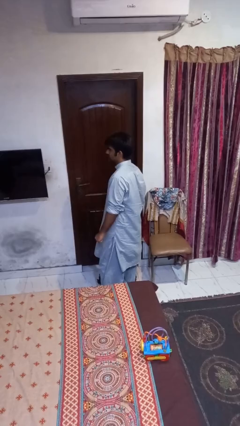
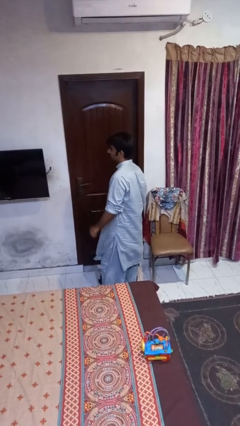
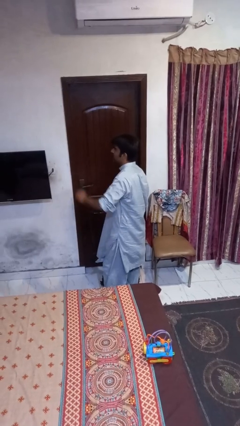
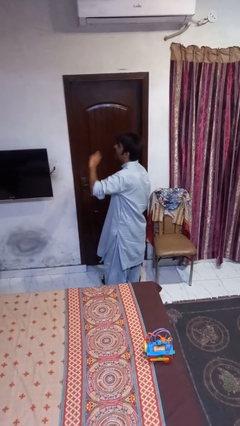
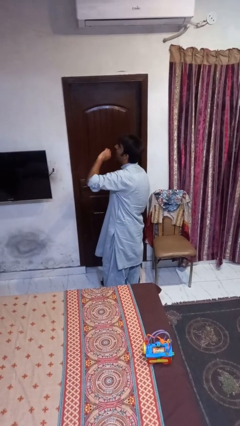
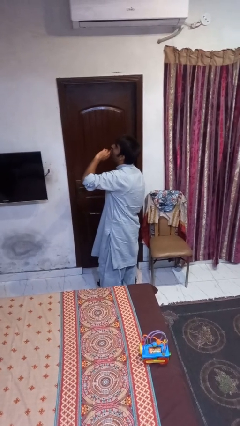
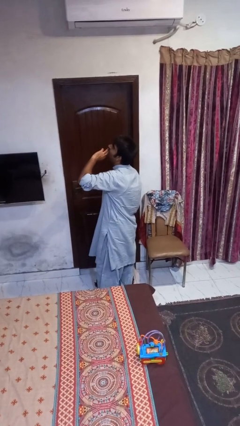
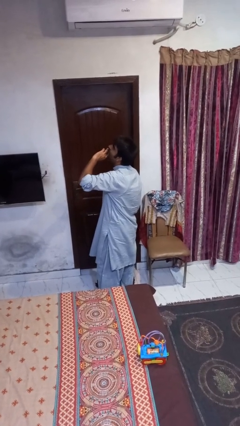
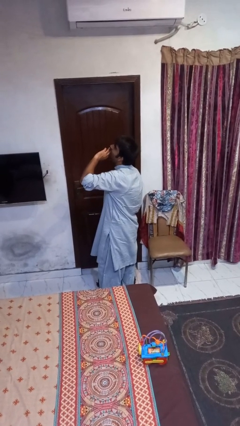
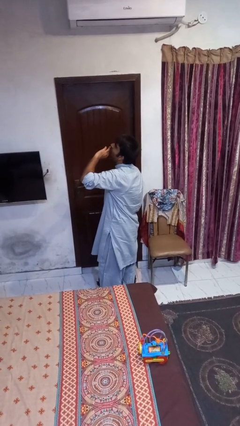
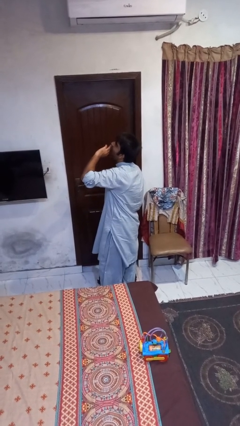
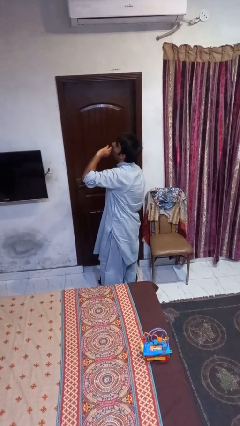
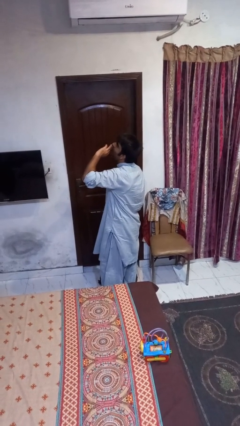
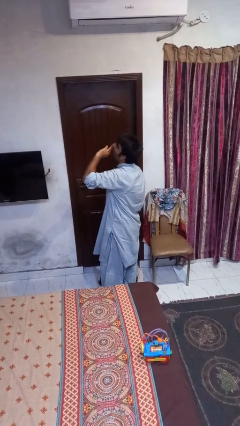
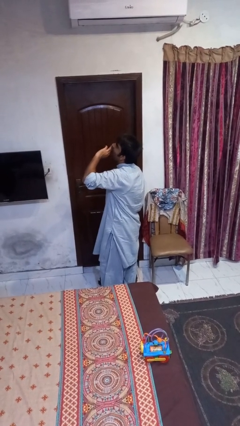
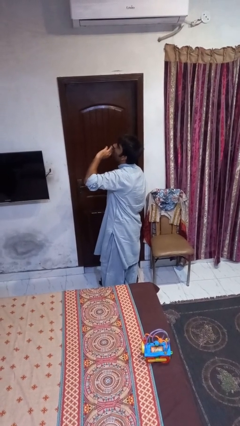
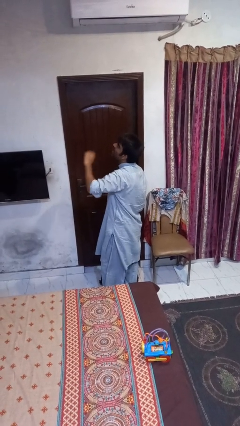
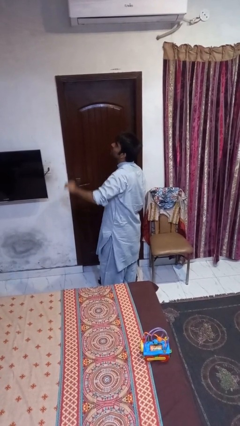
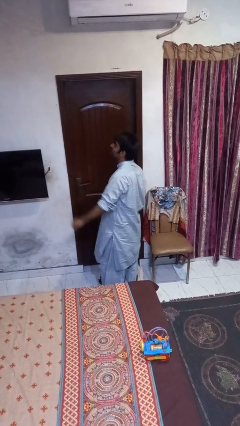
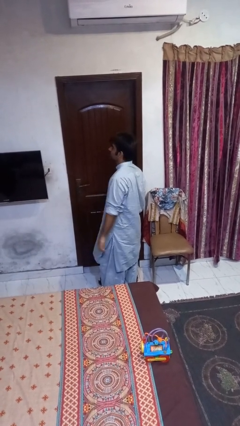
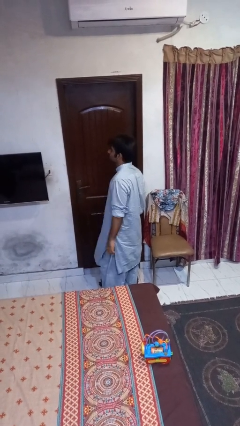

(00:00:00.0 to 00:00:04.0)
person yawns

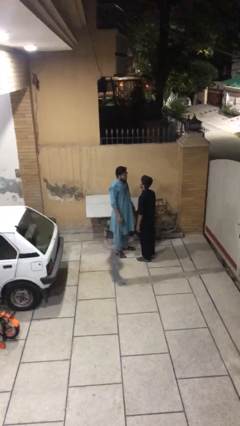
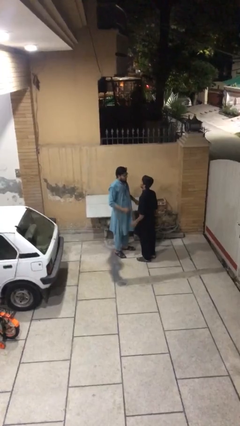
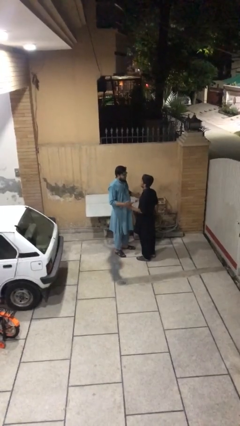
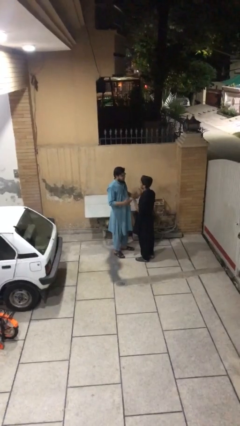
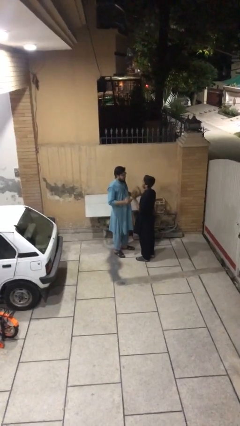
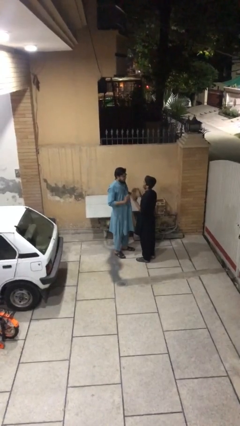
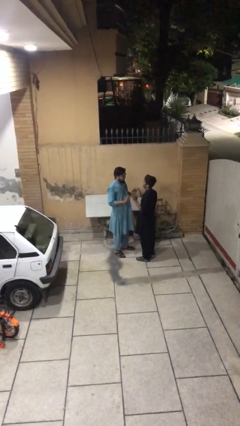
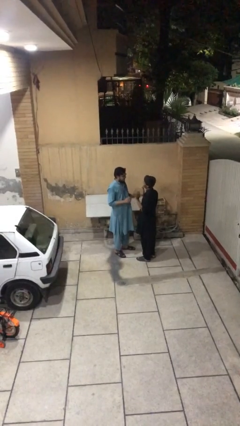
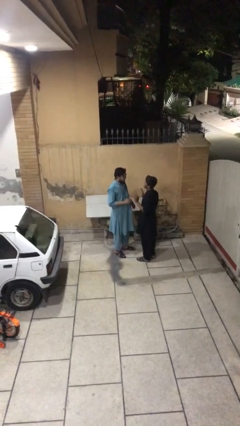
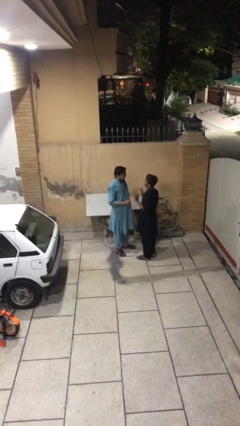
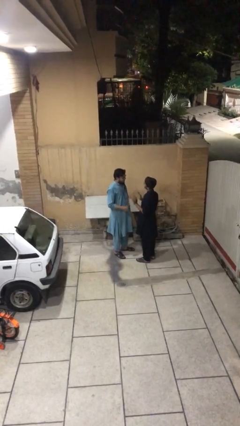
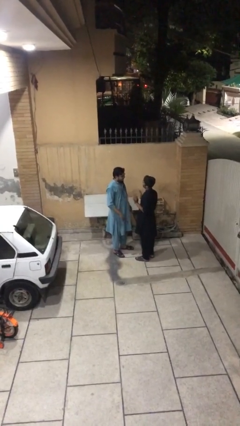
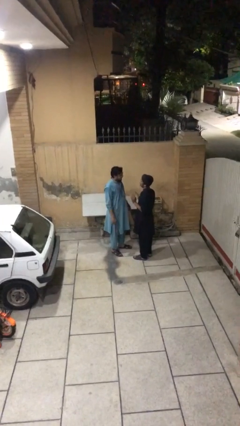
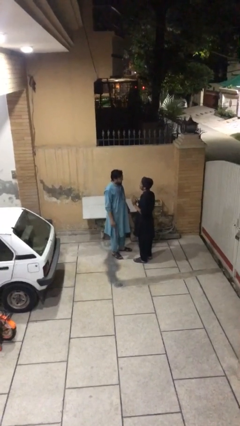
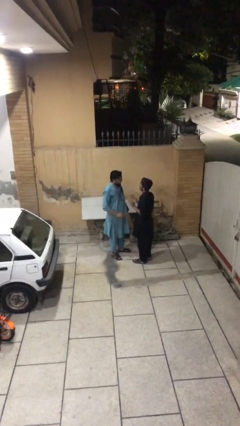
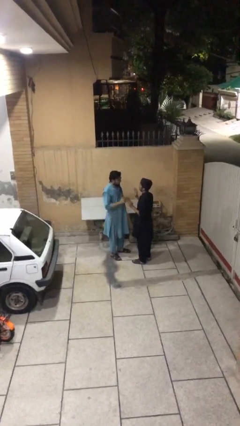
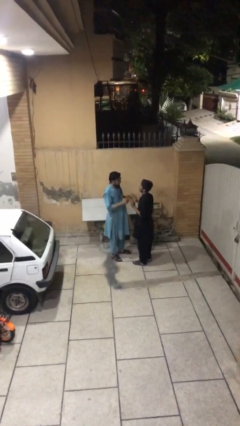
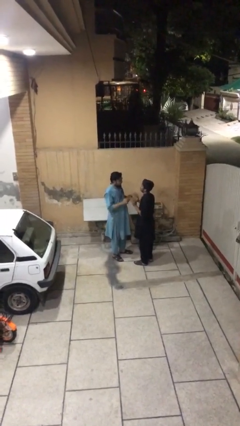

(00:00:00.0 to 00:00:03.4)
person talks to person

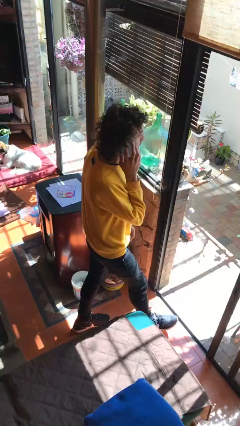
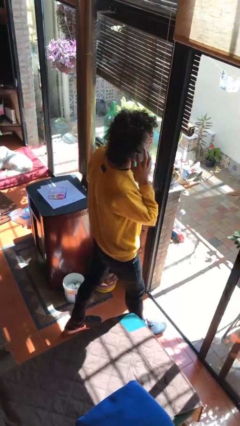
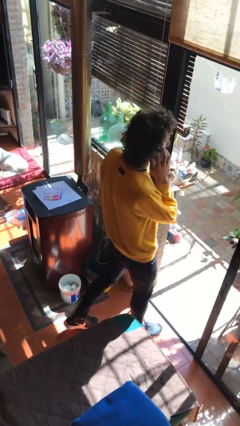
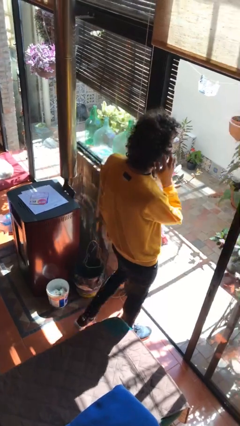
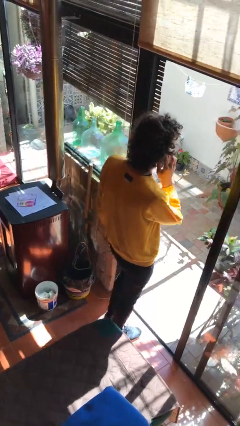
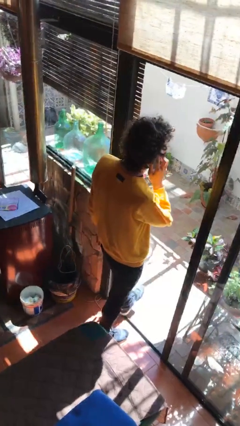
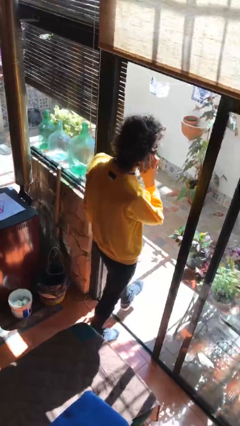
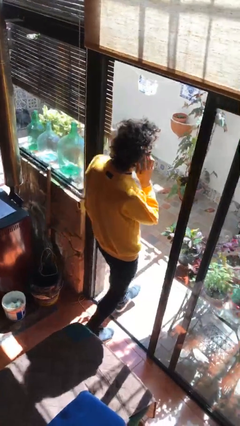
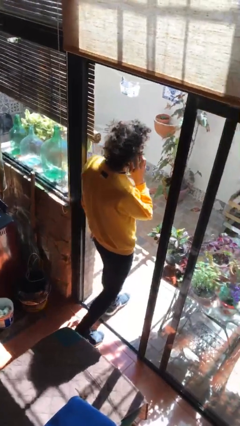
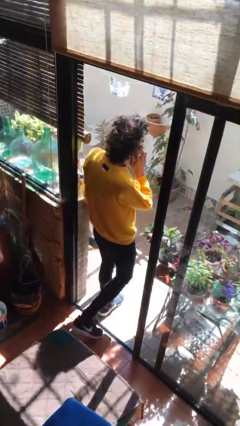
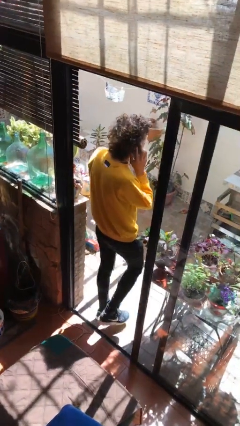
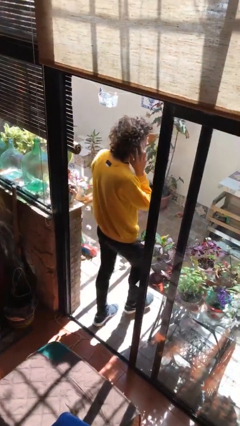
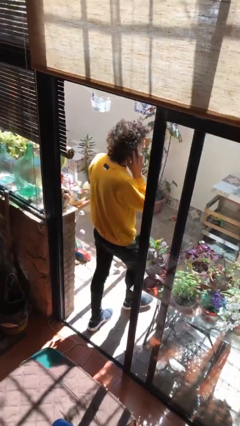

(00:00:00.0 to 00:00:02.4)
person exits scene through structure

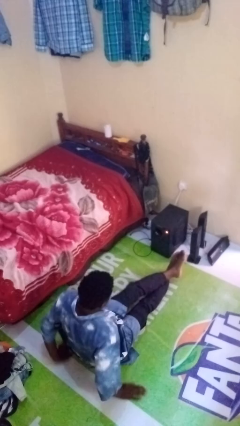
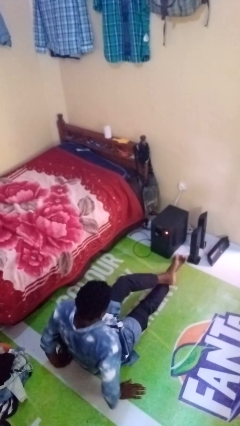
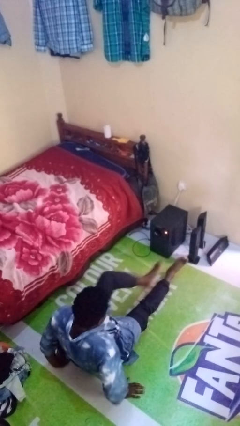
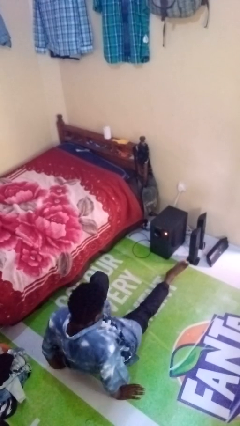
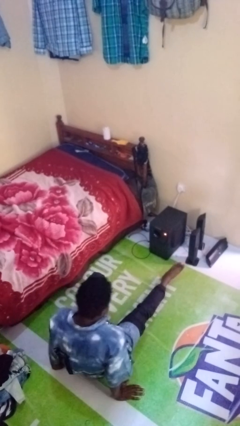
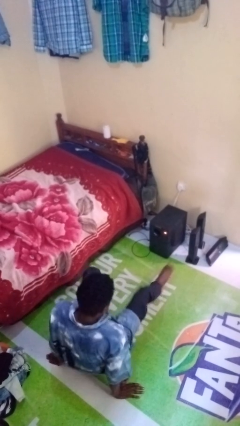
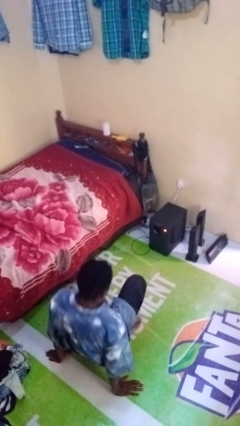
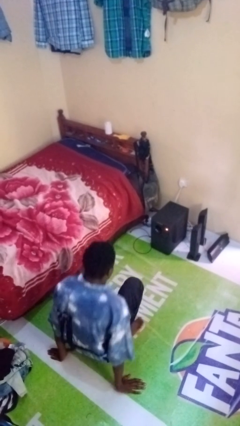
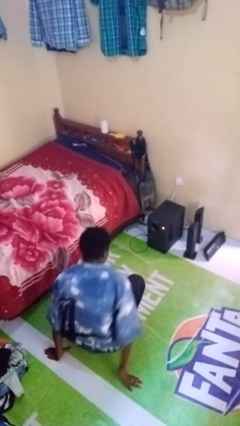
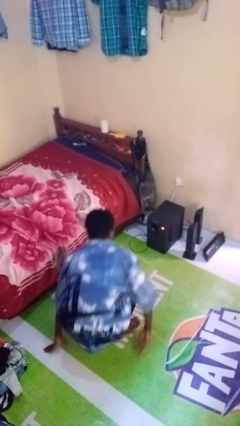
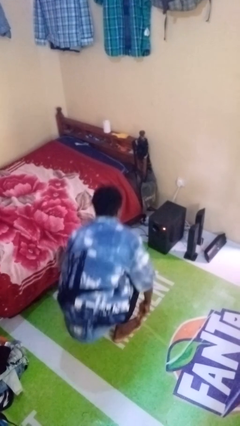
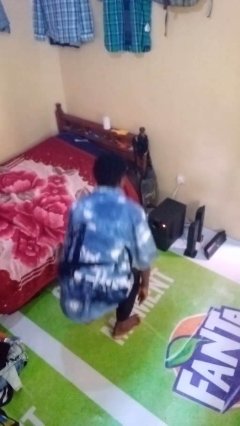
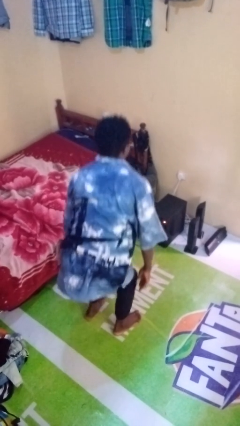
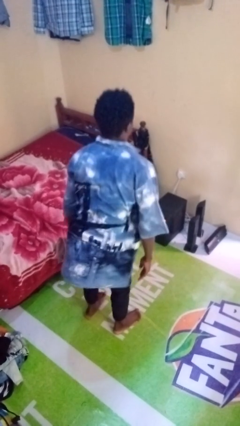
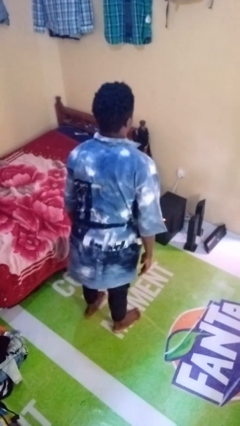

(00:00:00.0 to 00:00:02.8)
person stands up from floor

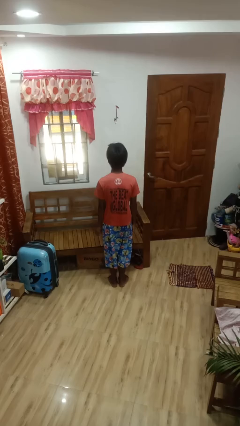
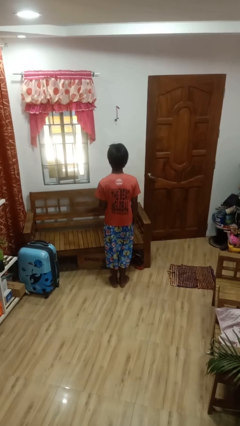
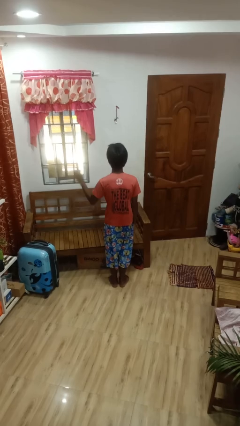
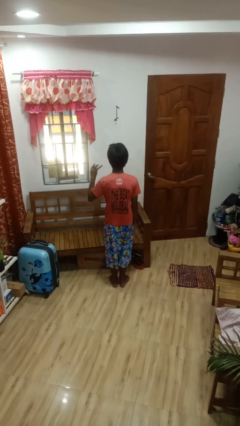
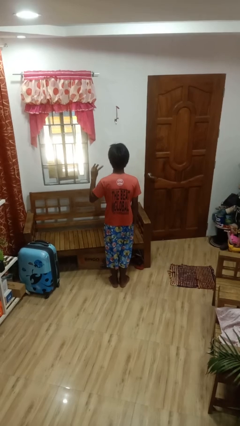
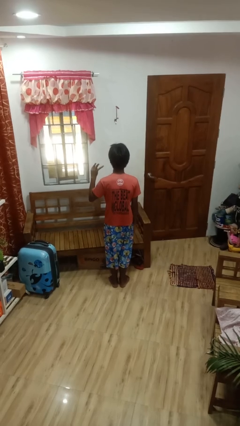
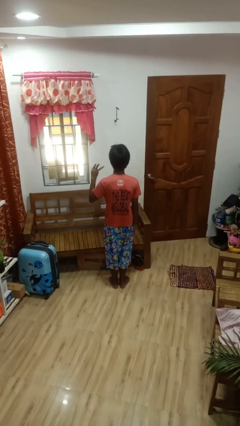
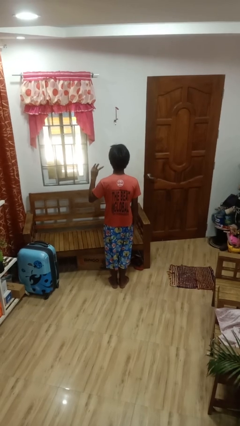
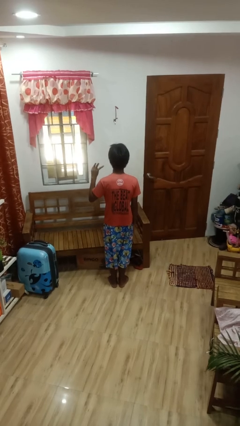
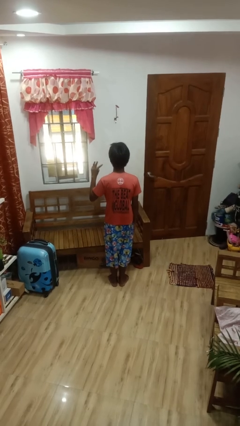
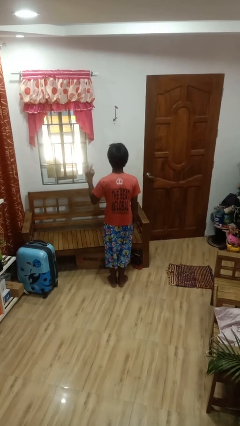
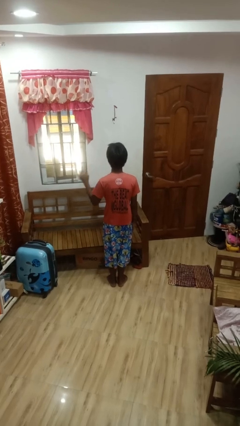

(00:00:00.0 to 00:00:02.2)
person gestures number three

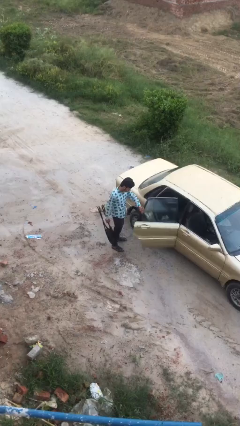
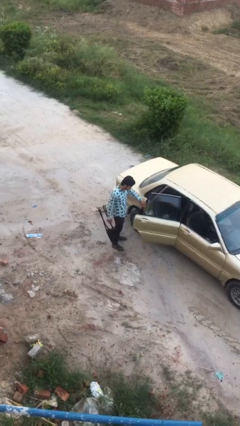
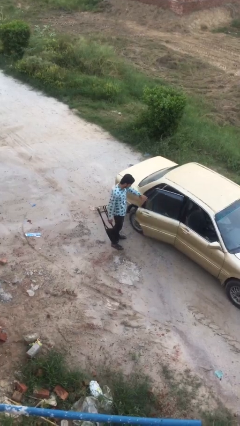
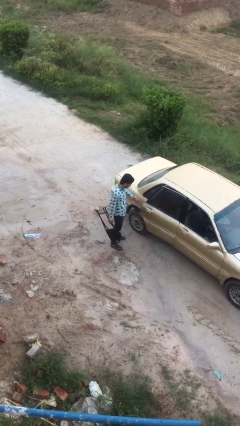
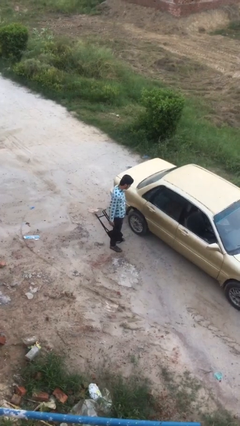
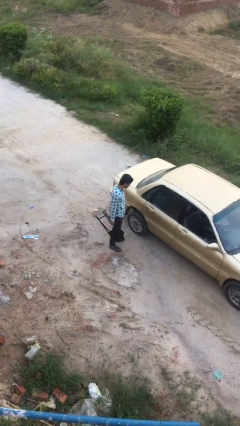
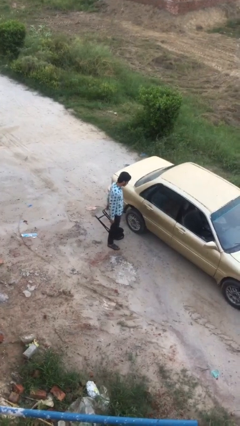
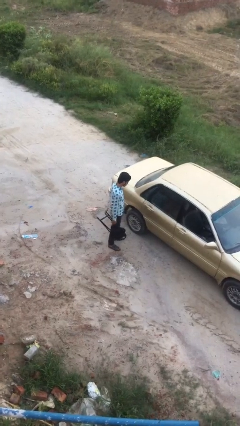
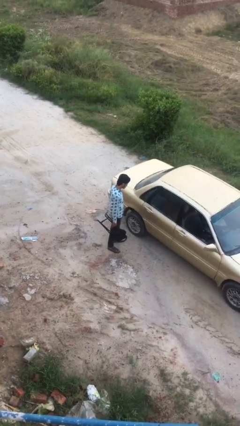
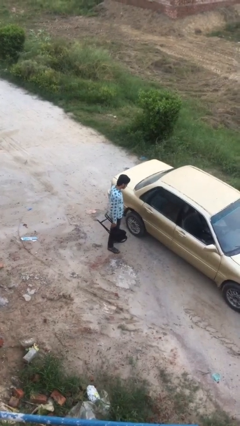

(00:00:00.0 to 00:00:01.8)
person closes car door

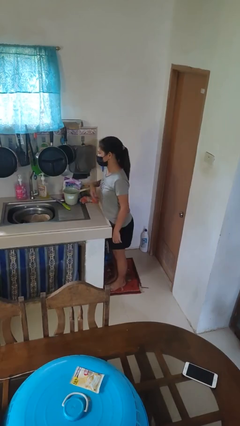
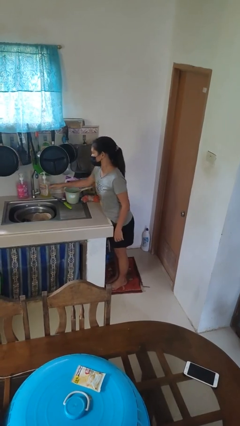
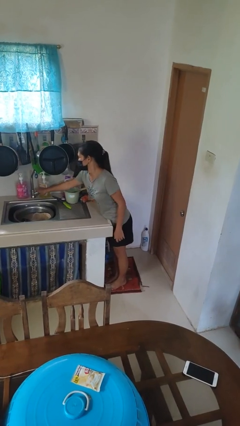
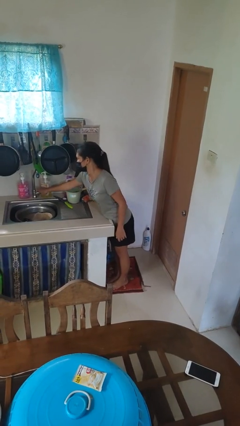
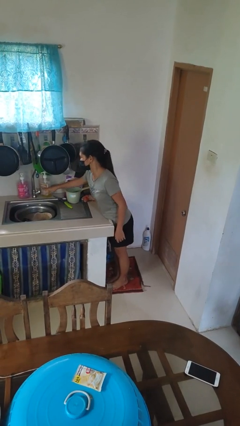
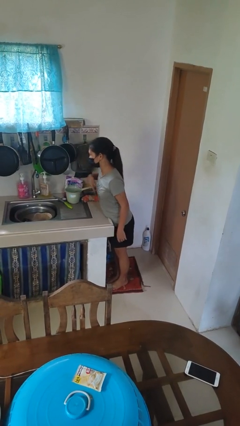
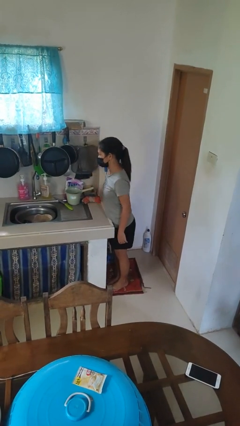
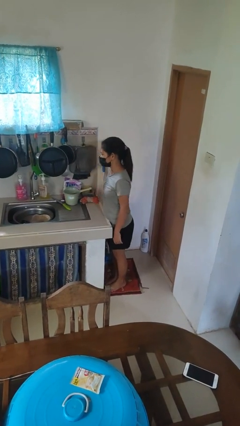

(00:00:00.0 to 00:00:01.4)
person turns off faucet
